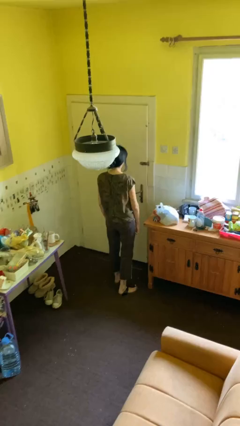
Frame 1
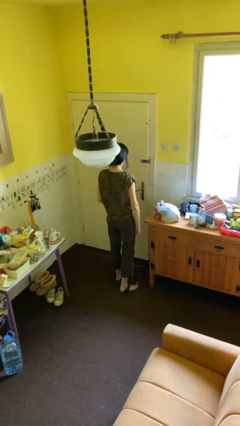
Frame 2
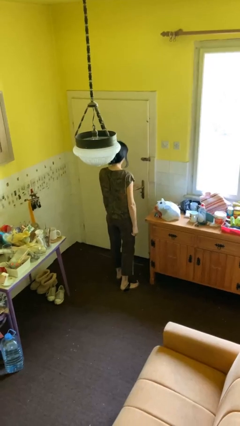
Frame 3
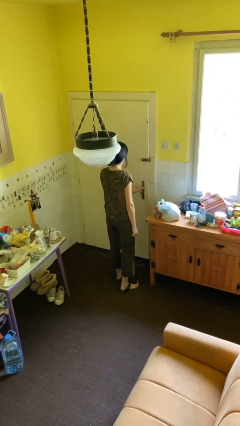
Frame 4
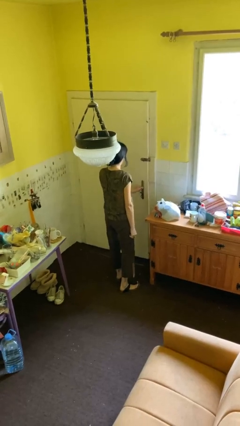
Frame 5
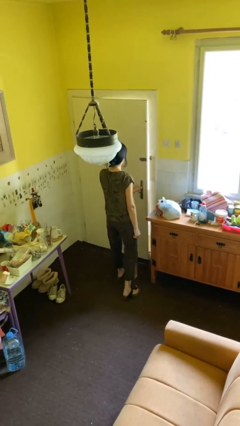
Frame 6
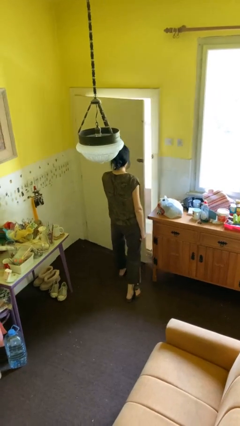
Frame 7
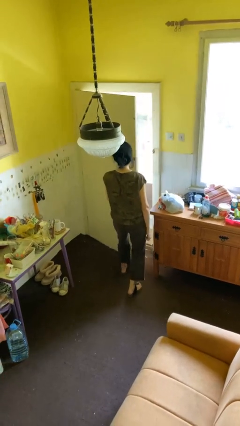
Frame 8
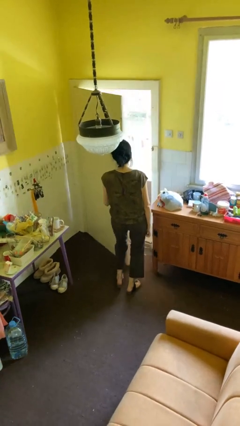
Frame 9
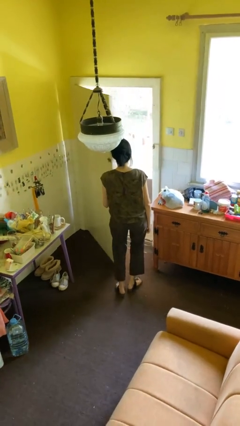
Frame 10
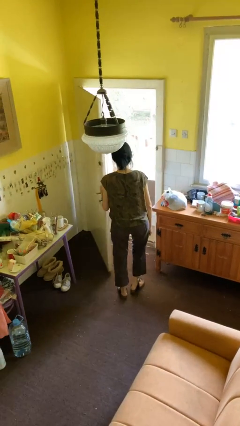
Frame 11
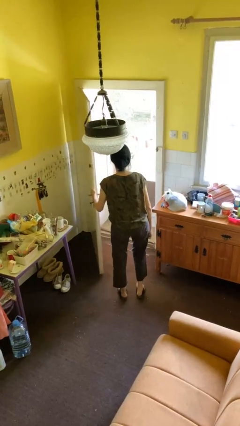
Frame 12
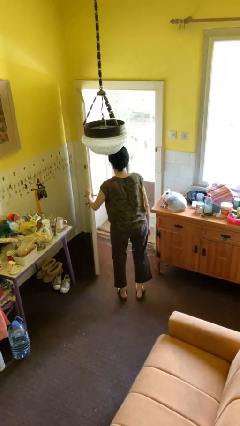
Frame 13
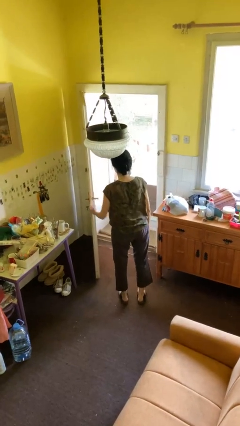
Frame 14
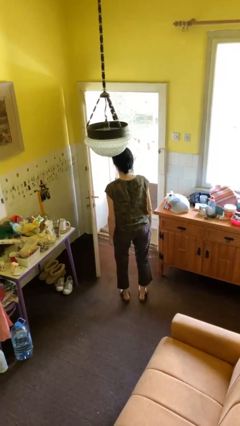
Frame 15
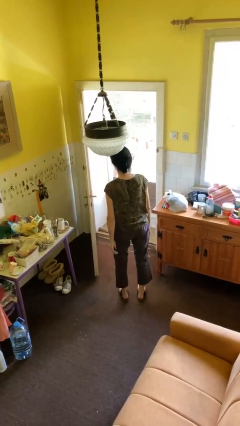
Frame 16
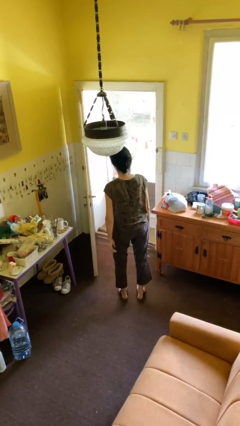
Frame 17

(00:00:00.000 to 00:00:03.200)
person opens facility door

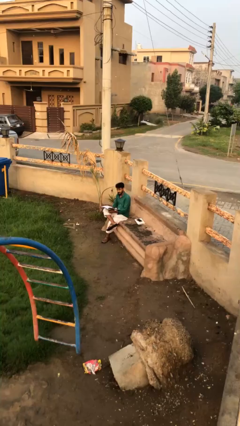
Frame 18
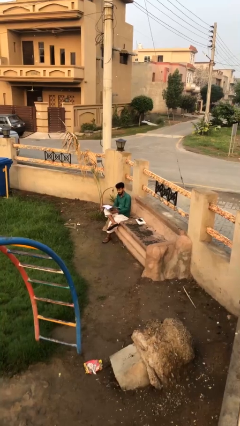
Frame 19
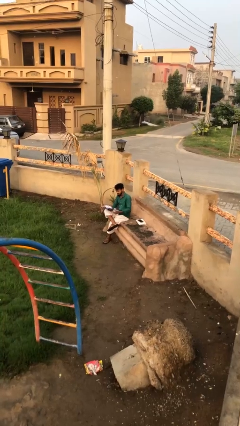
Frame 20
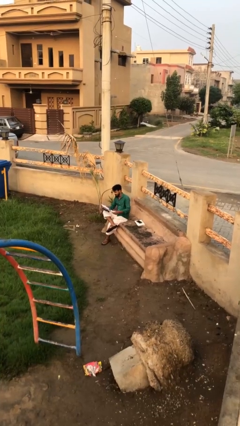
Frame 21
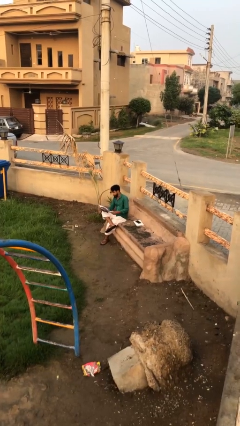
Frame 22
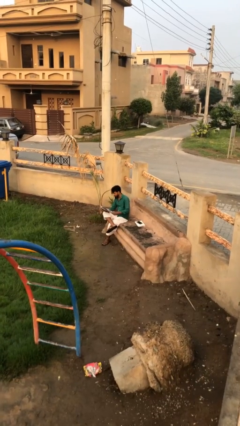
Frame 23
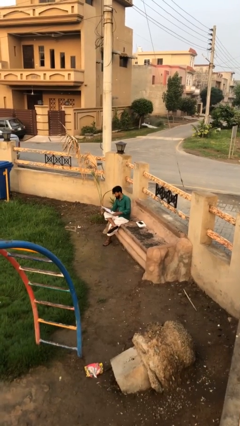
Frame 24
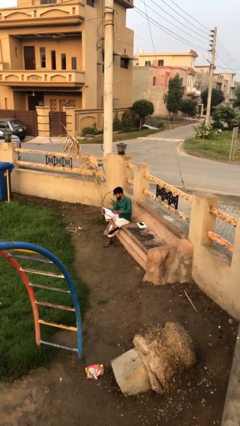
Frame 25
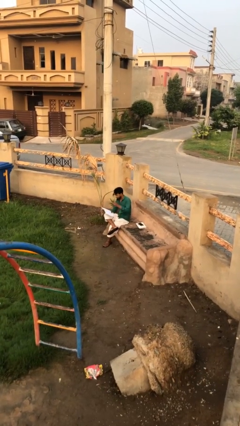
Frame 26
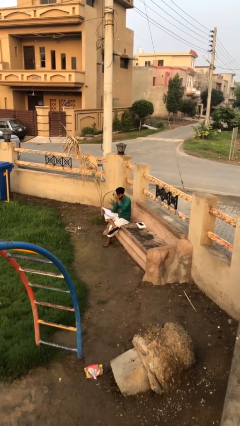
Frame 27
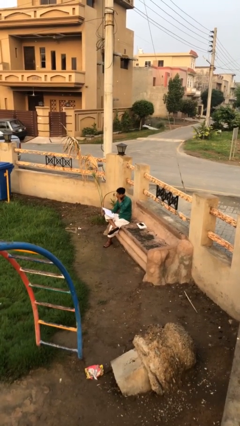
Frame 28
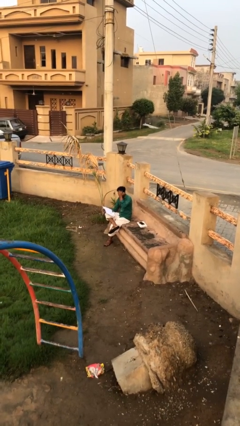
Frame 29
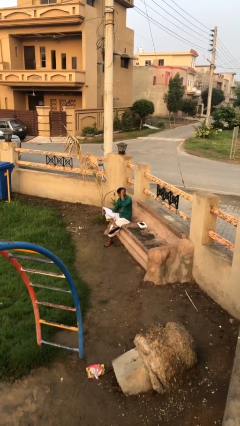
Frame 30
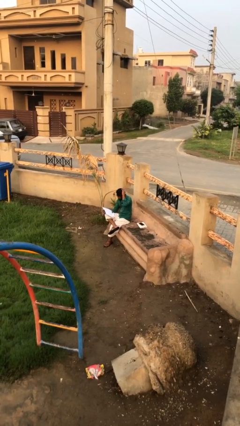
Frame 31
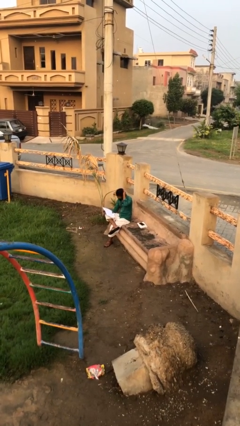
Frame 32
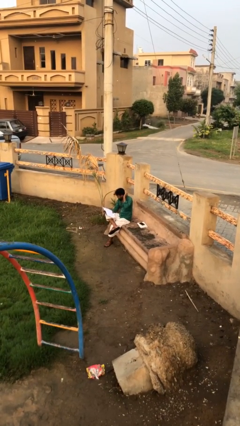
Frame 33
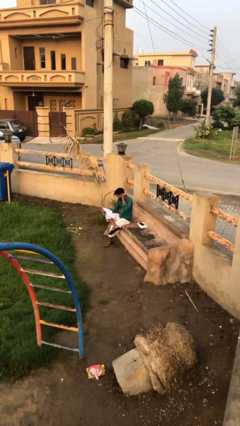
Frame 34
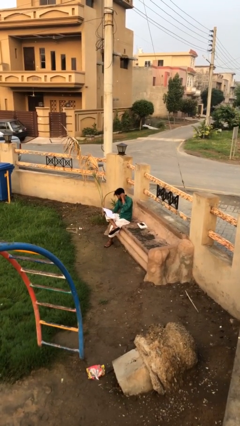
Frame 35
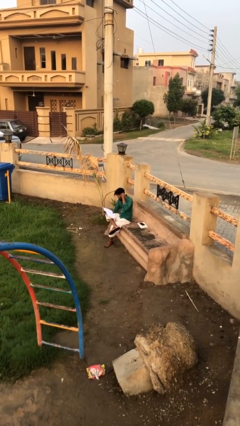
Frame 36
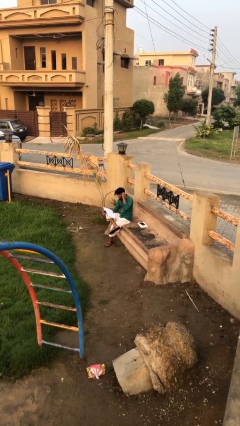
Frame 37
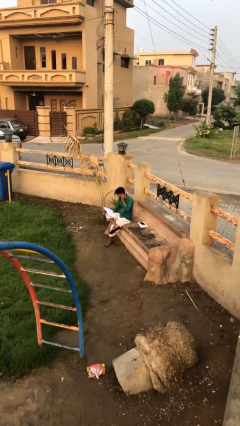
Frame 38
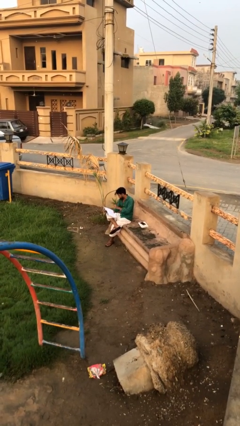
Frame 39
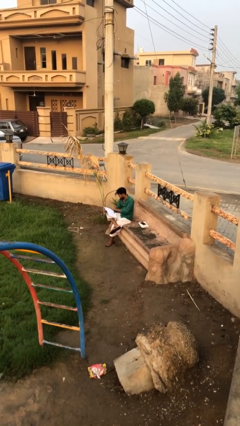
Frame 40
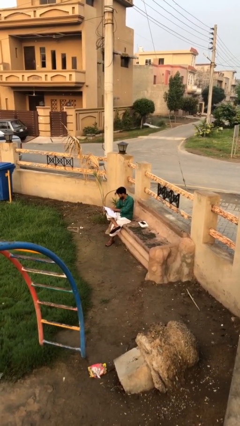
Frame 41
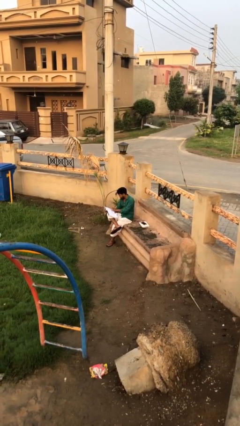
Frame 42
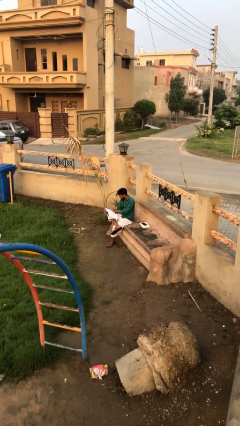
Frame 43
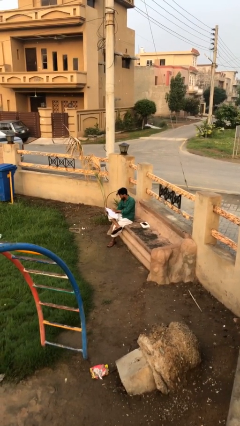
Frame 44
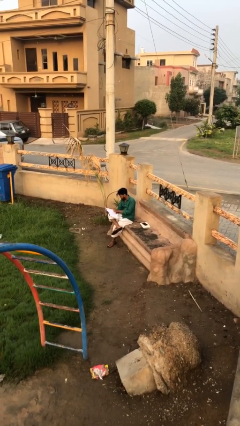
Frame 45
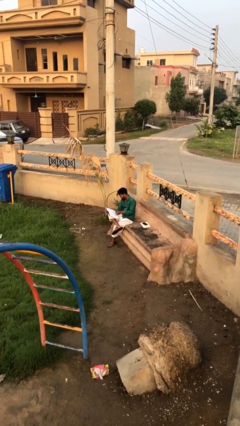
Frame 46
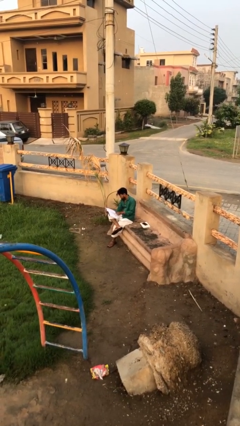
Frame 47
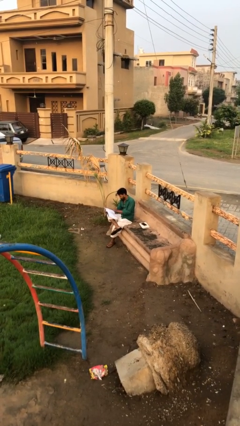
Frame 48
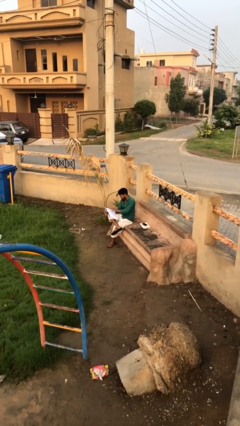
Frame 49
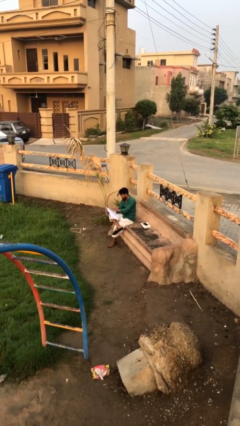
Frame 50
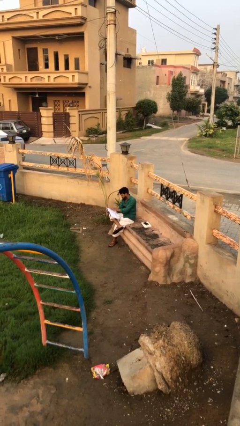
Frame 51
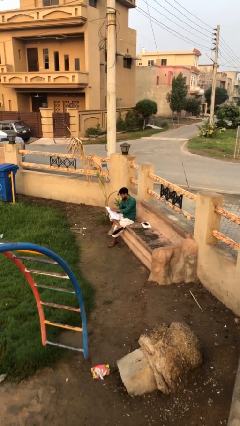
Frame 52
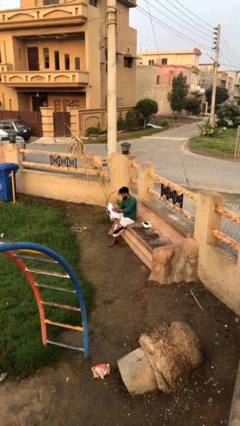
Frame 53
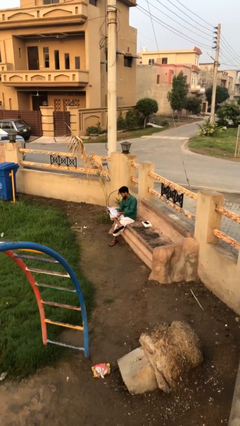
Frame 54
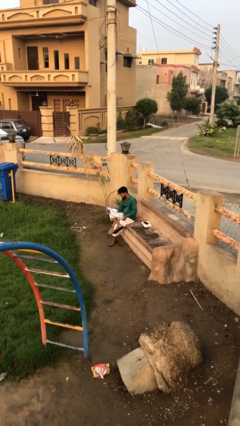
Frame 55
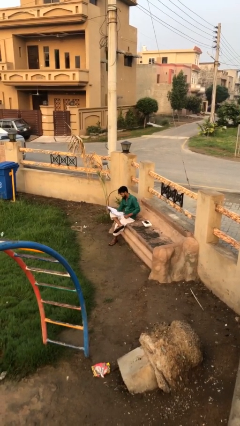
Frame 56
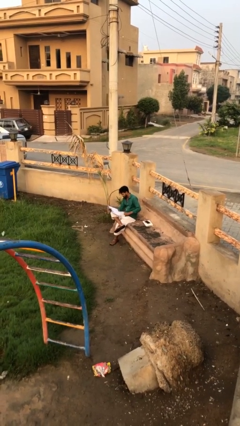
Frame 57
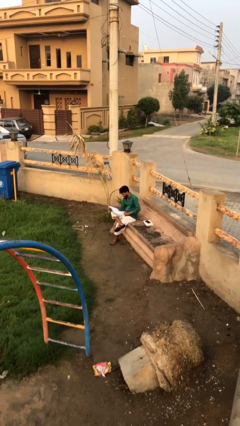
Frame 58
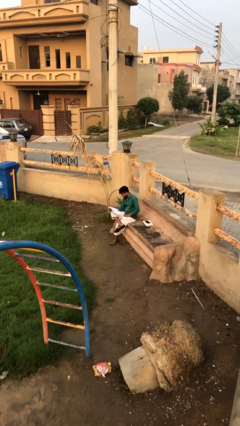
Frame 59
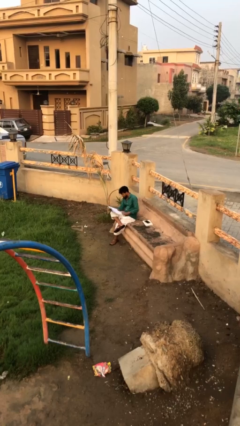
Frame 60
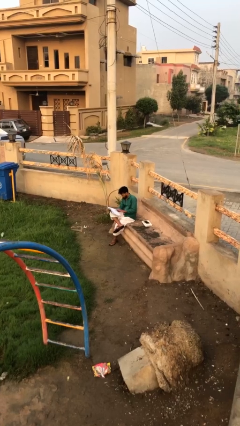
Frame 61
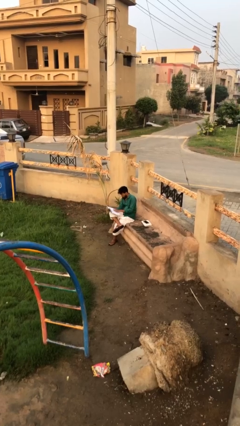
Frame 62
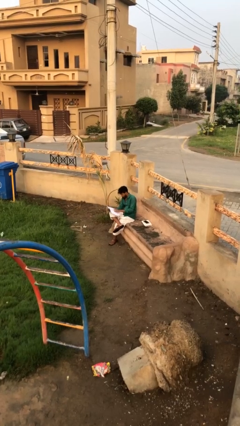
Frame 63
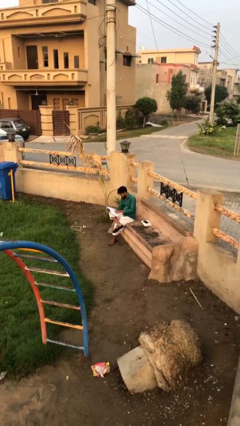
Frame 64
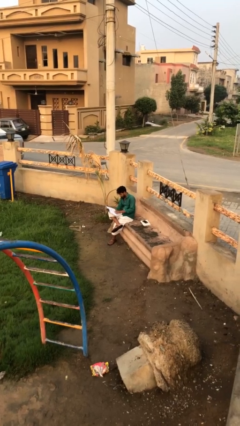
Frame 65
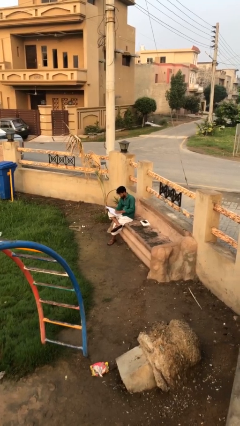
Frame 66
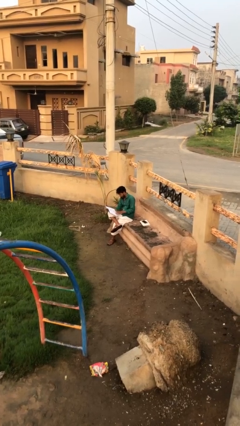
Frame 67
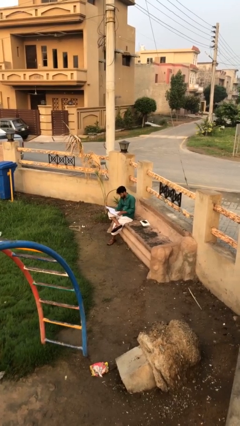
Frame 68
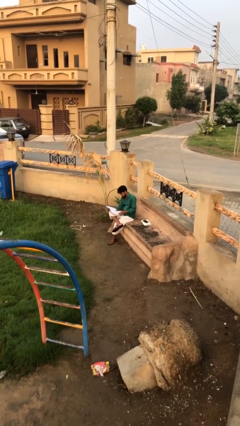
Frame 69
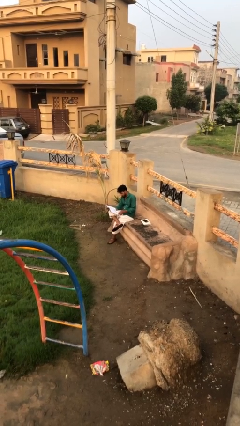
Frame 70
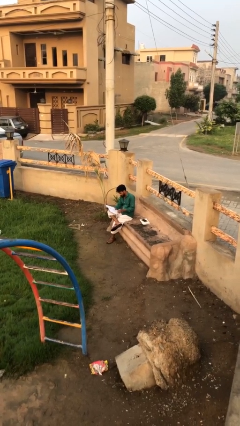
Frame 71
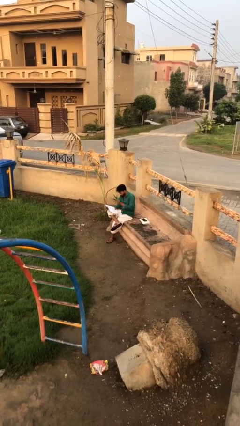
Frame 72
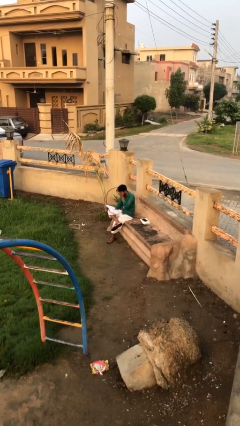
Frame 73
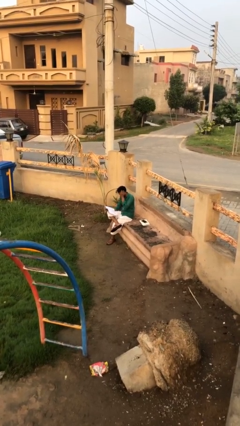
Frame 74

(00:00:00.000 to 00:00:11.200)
person reads document

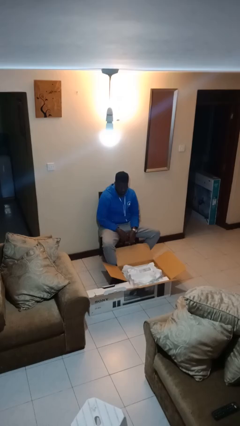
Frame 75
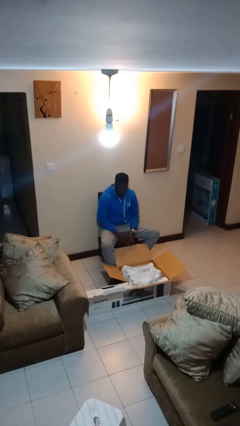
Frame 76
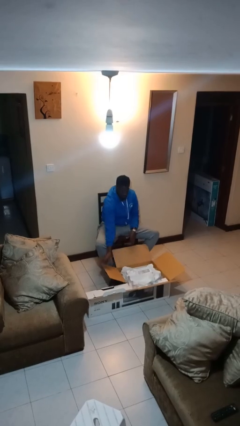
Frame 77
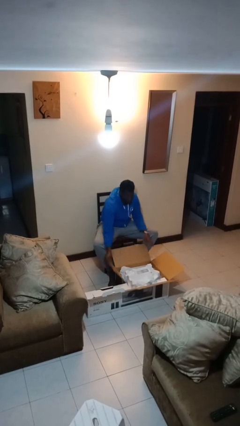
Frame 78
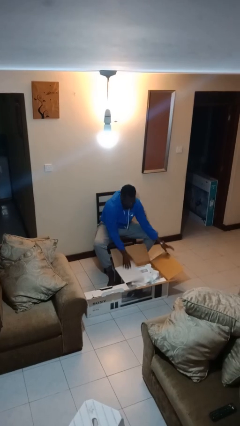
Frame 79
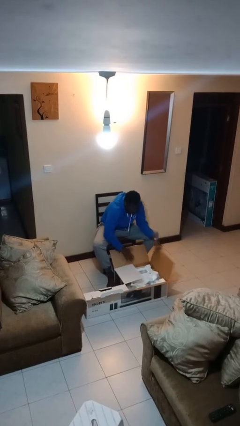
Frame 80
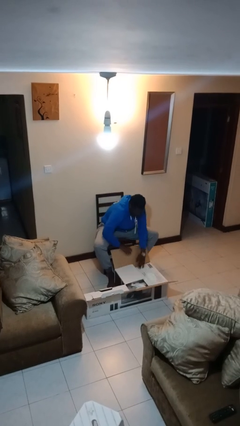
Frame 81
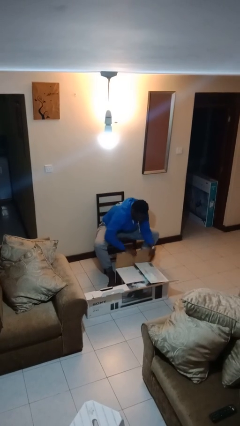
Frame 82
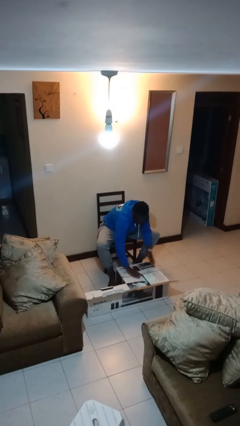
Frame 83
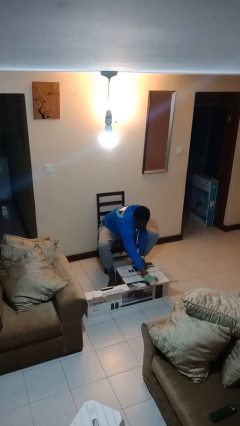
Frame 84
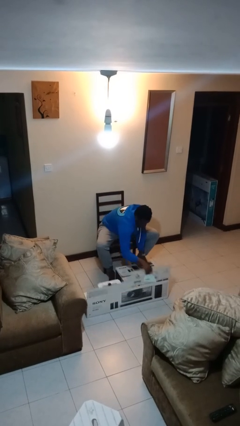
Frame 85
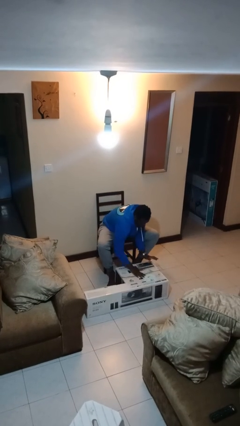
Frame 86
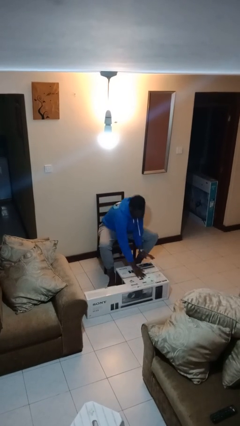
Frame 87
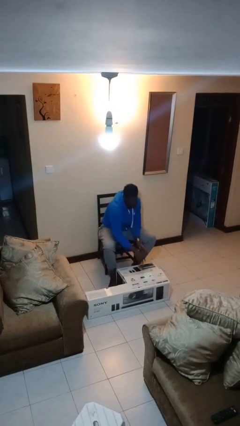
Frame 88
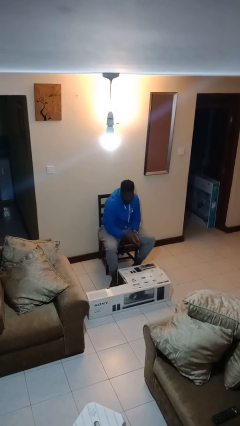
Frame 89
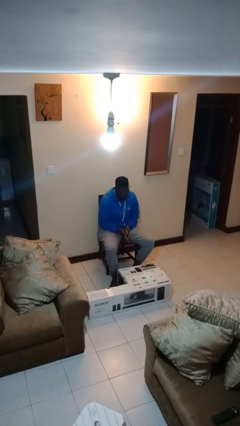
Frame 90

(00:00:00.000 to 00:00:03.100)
person closes box
